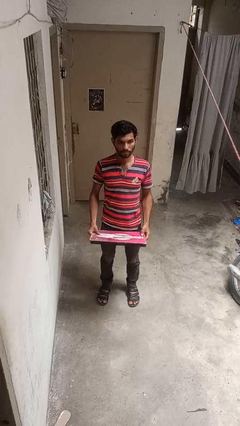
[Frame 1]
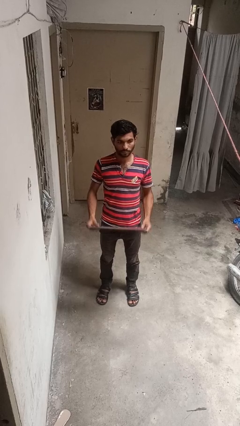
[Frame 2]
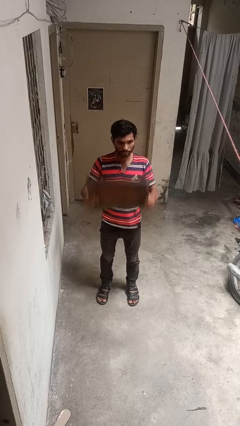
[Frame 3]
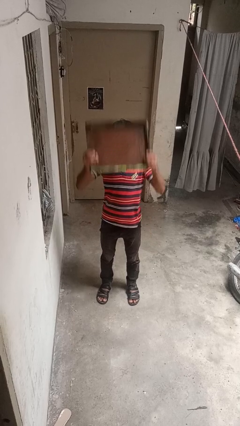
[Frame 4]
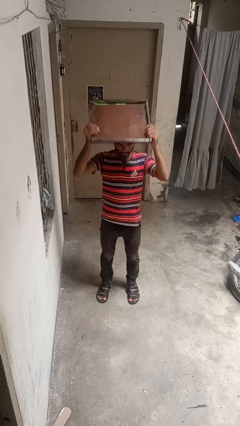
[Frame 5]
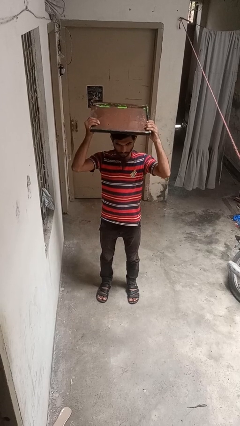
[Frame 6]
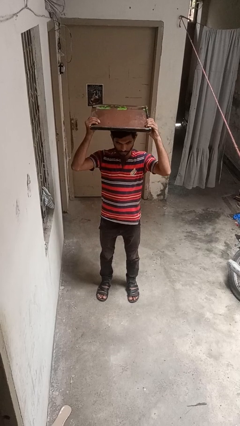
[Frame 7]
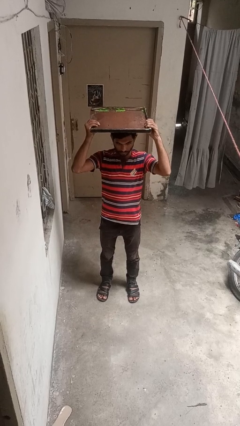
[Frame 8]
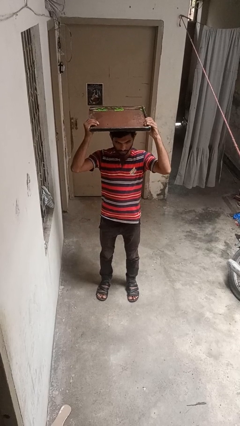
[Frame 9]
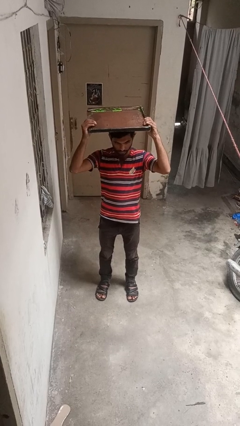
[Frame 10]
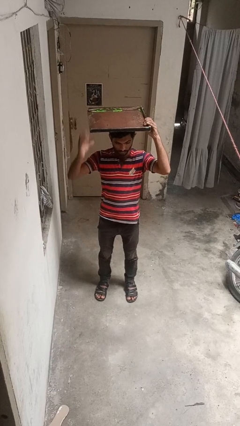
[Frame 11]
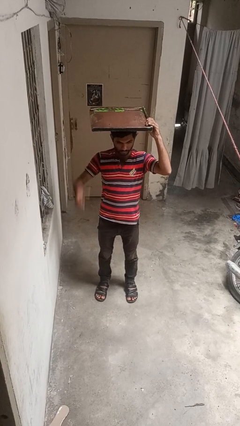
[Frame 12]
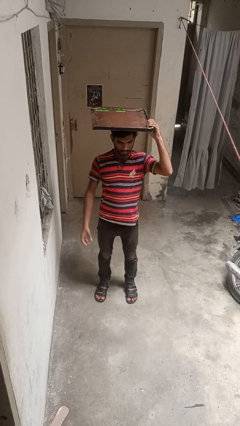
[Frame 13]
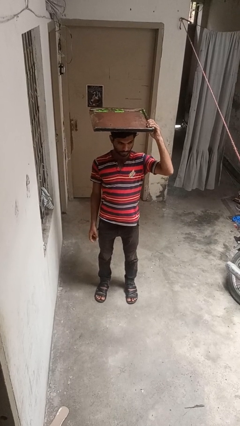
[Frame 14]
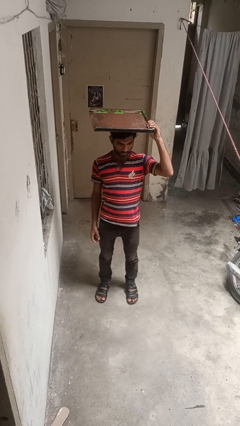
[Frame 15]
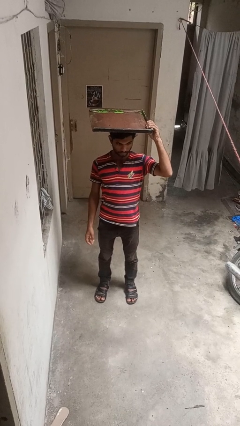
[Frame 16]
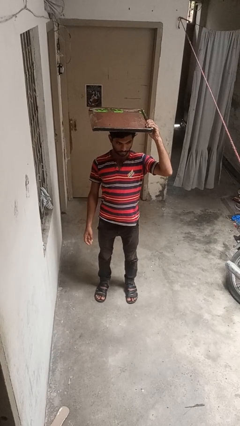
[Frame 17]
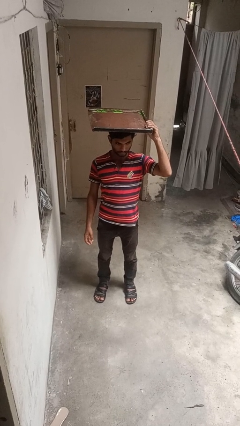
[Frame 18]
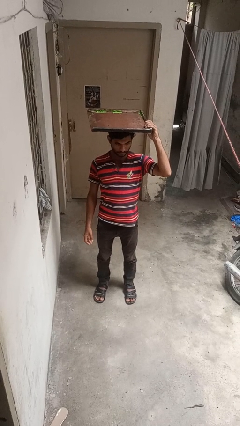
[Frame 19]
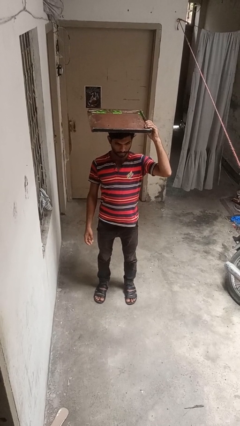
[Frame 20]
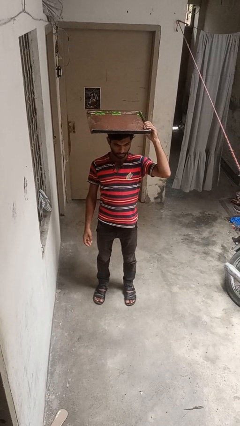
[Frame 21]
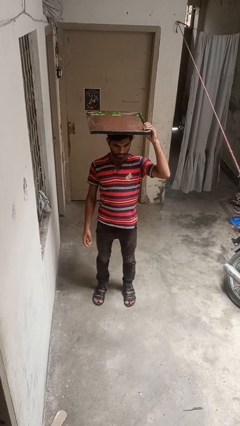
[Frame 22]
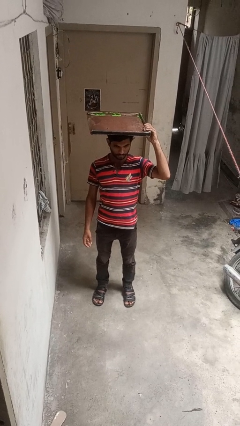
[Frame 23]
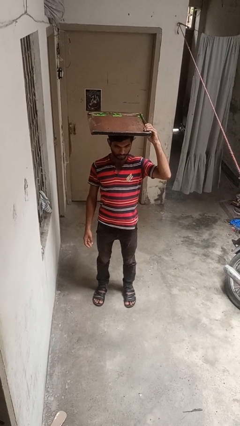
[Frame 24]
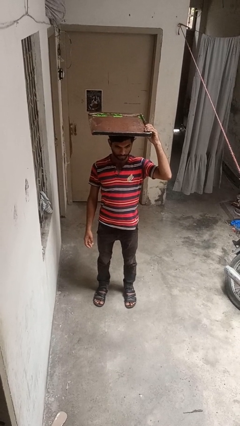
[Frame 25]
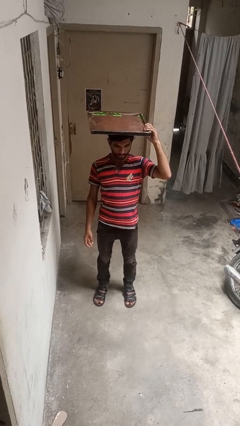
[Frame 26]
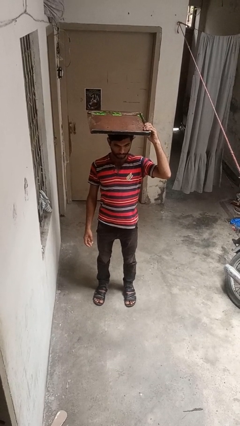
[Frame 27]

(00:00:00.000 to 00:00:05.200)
person holds object above head

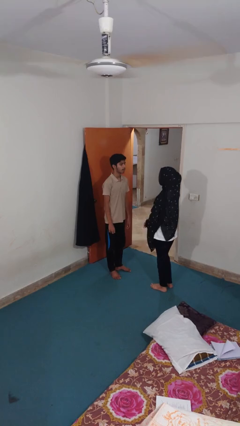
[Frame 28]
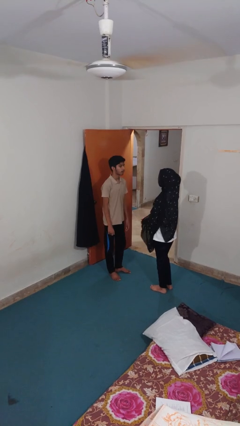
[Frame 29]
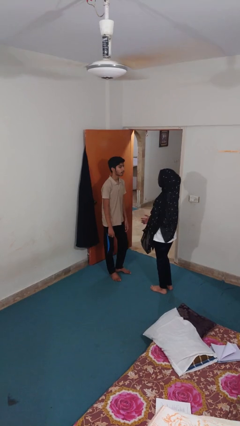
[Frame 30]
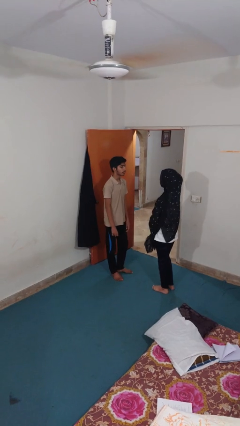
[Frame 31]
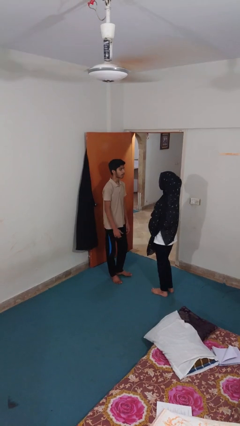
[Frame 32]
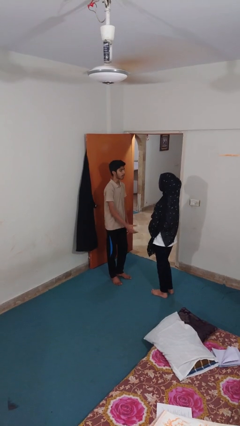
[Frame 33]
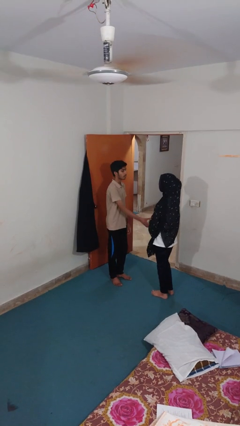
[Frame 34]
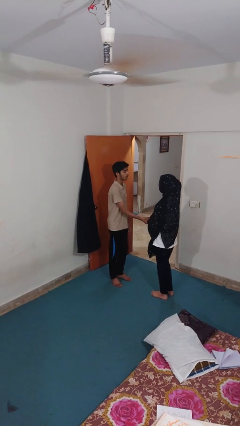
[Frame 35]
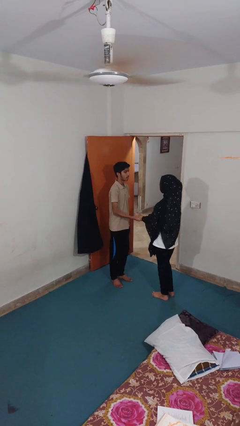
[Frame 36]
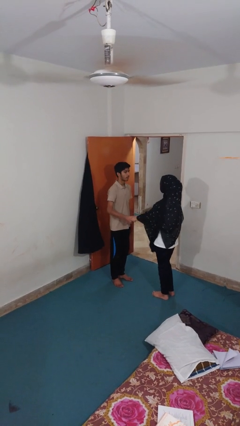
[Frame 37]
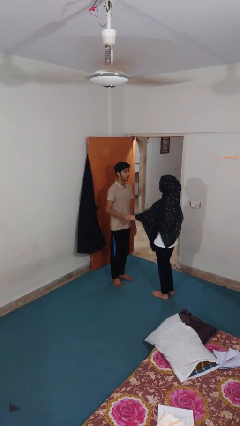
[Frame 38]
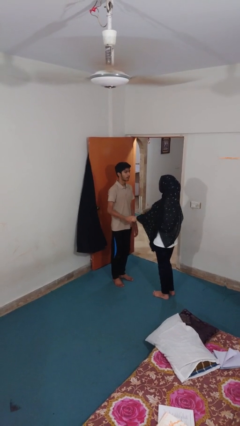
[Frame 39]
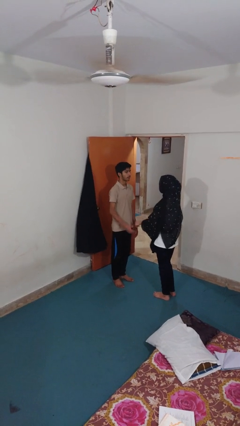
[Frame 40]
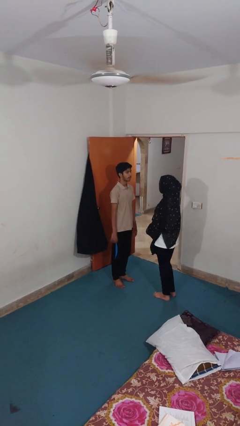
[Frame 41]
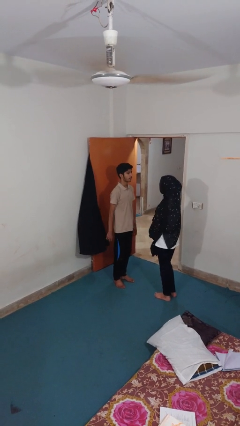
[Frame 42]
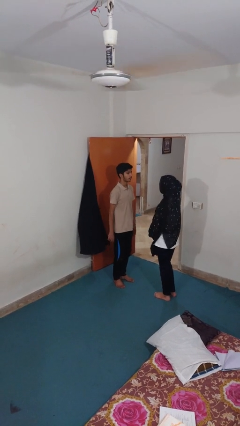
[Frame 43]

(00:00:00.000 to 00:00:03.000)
person grabs person by forearm

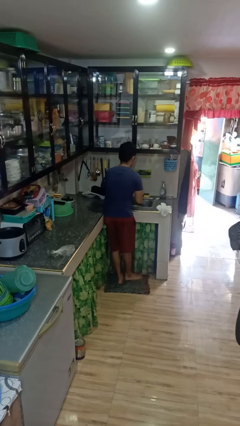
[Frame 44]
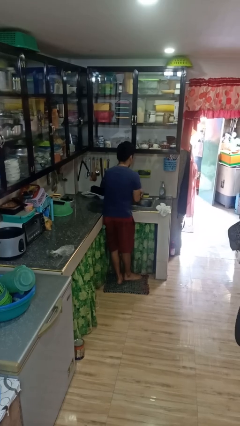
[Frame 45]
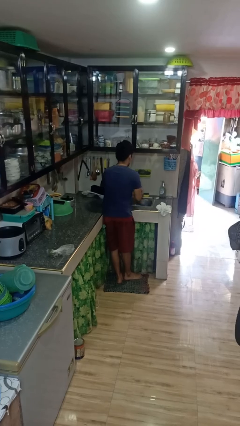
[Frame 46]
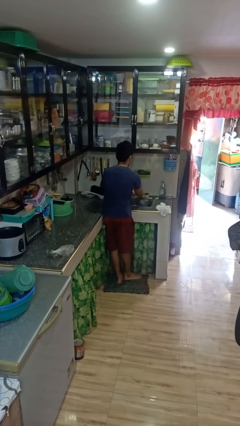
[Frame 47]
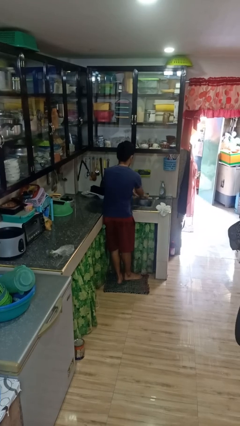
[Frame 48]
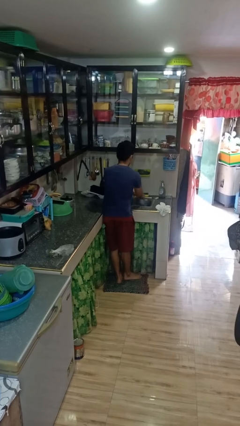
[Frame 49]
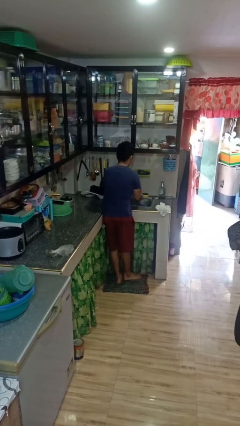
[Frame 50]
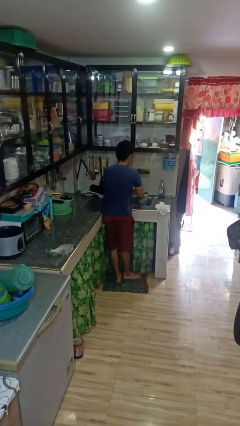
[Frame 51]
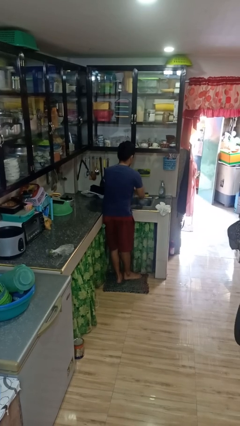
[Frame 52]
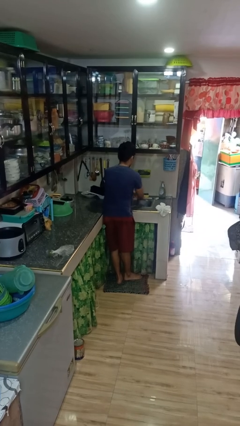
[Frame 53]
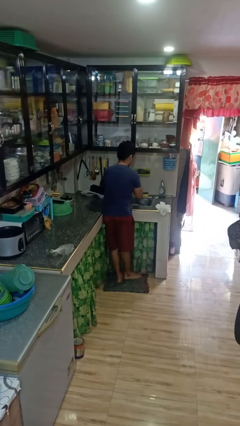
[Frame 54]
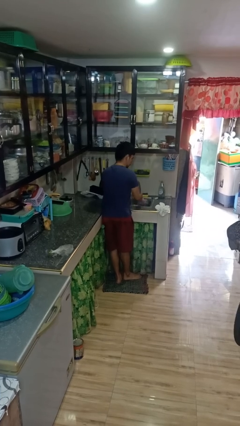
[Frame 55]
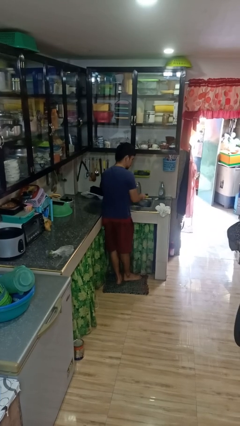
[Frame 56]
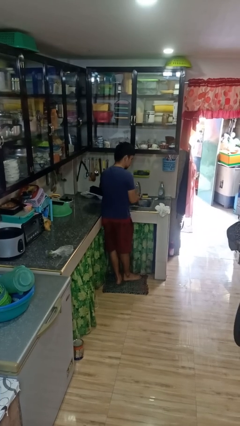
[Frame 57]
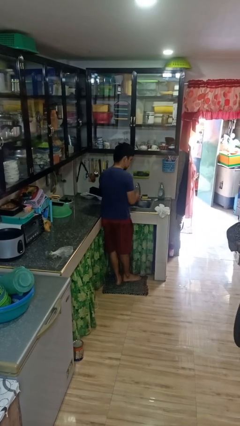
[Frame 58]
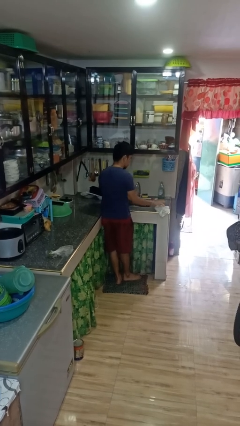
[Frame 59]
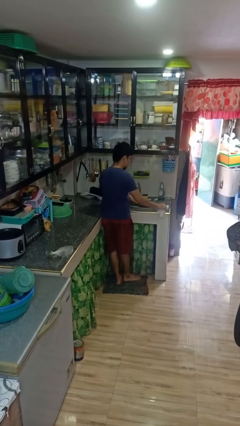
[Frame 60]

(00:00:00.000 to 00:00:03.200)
person washes hands

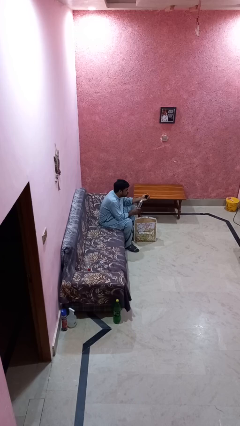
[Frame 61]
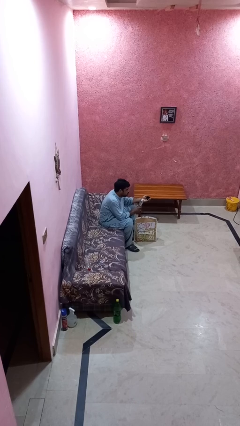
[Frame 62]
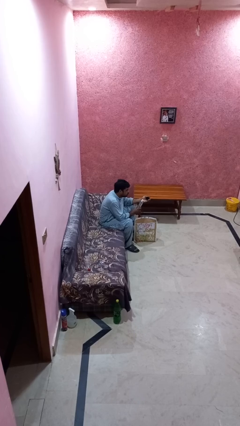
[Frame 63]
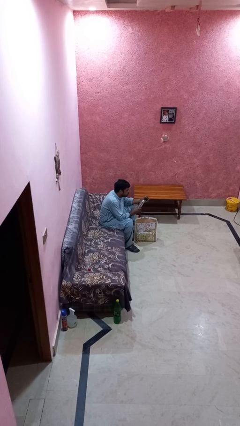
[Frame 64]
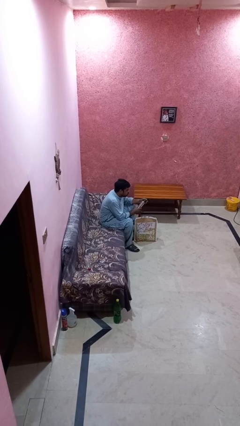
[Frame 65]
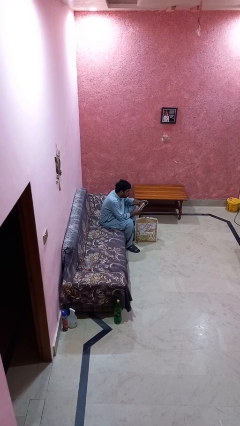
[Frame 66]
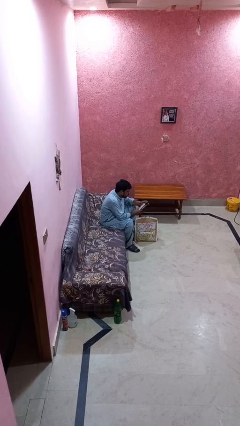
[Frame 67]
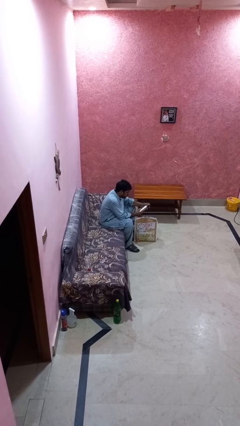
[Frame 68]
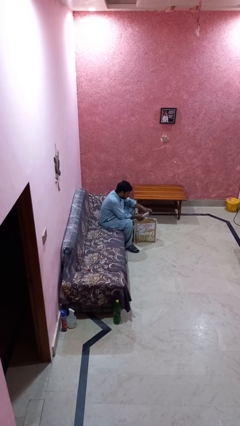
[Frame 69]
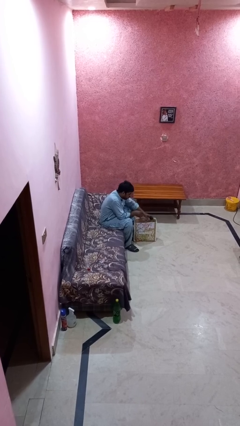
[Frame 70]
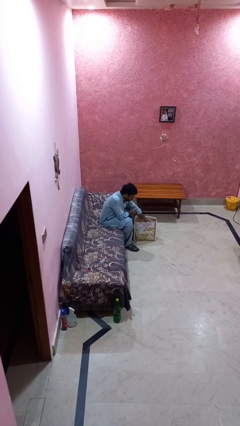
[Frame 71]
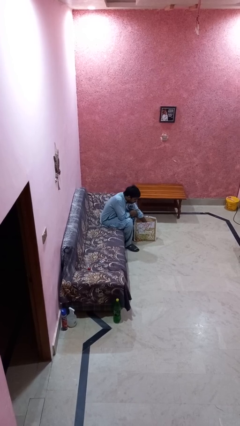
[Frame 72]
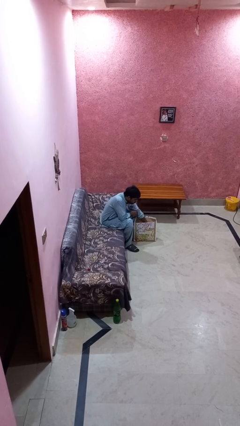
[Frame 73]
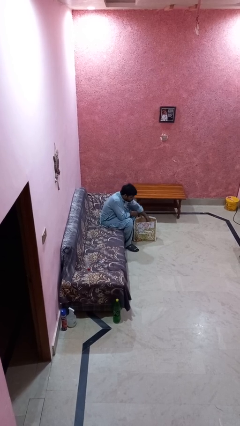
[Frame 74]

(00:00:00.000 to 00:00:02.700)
person puts object into bag

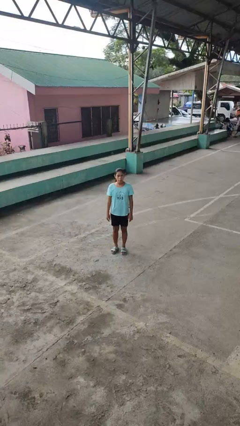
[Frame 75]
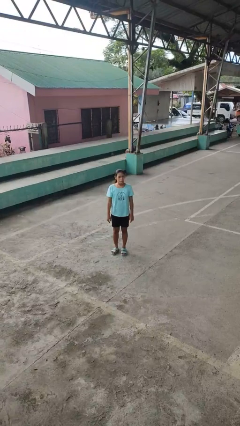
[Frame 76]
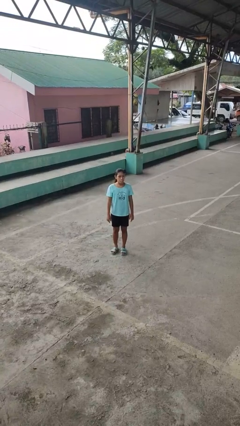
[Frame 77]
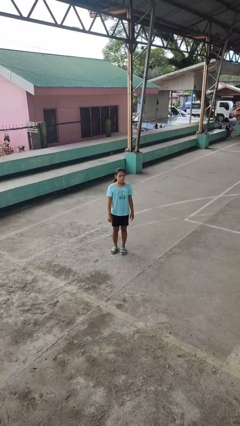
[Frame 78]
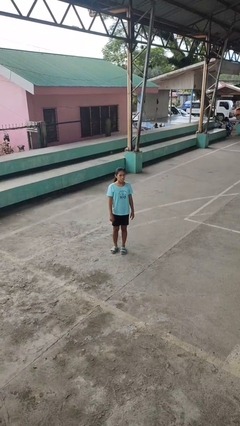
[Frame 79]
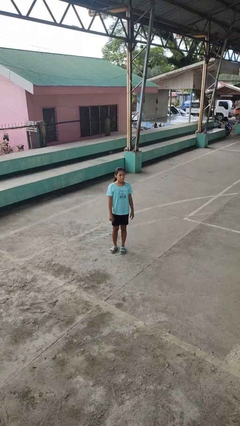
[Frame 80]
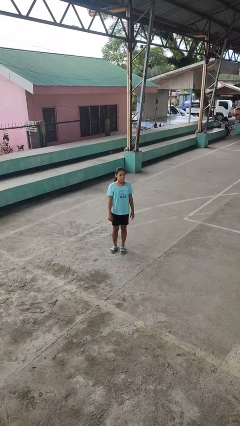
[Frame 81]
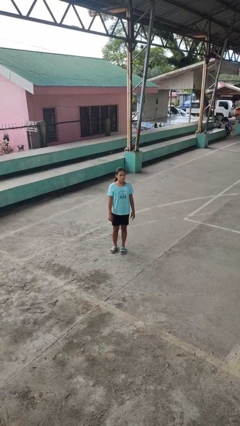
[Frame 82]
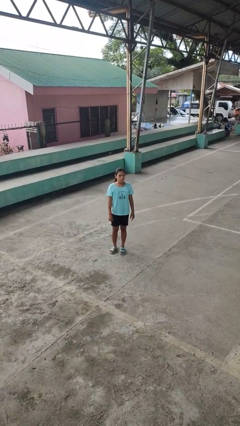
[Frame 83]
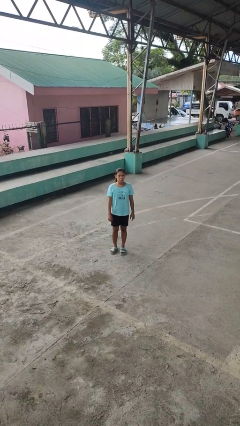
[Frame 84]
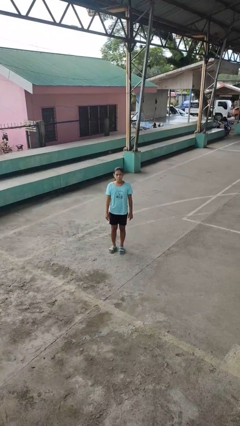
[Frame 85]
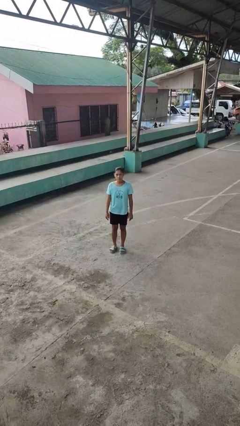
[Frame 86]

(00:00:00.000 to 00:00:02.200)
person sticks out tongue

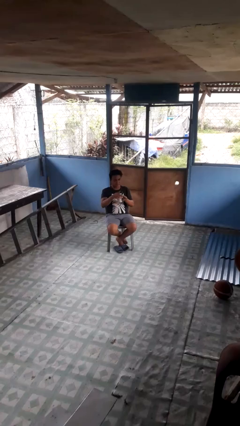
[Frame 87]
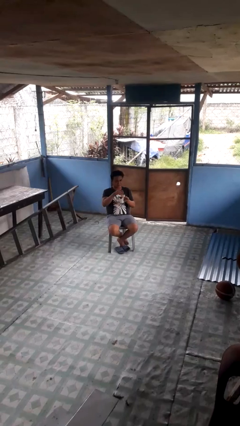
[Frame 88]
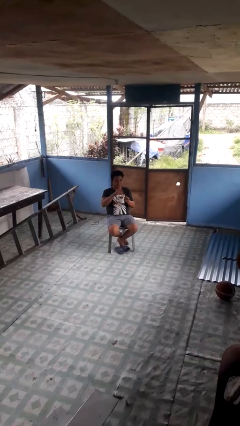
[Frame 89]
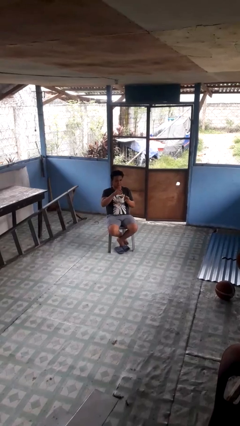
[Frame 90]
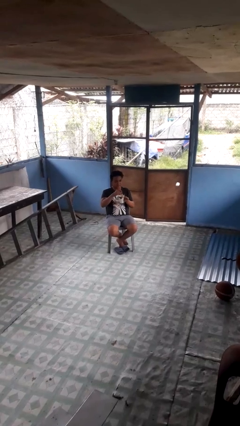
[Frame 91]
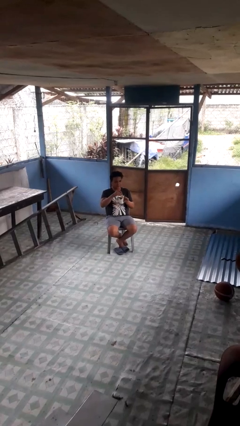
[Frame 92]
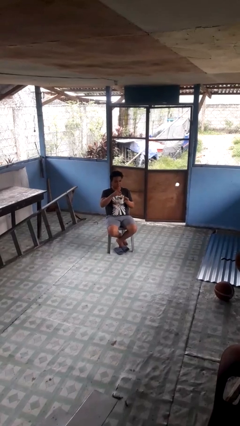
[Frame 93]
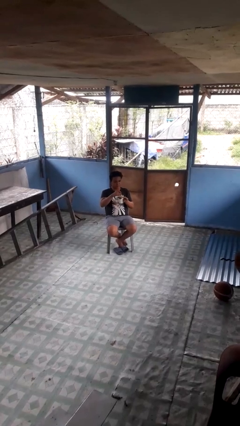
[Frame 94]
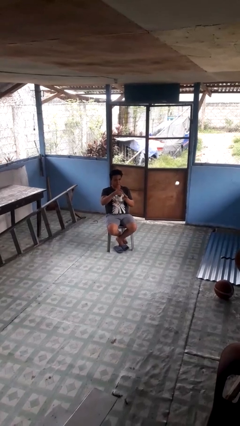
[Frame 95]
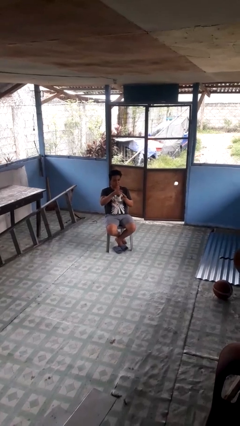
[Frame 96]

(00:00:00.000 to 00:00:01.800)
person stirs mug
